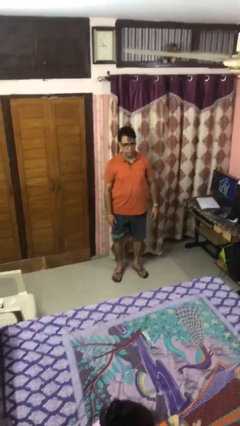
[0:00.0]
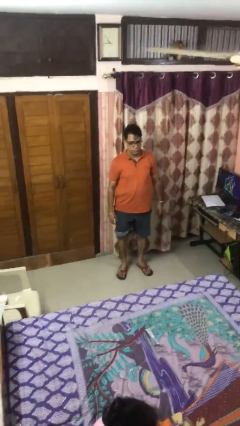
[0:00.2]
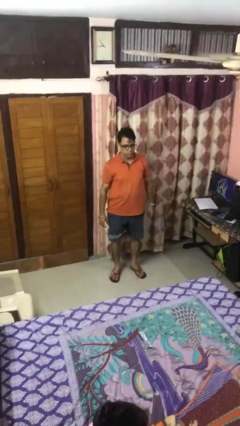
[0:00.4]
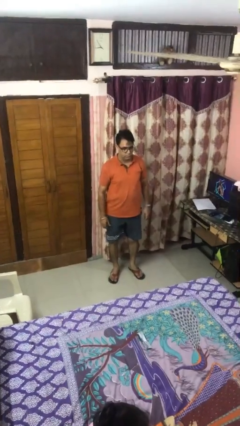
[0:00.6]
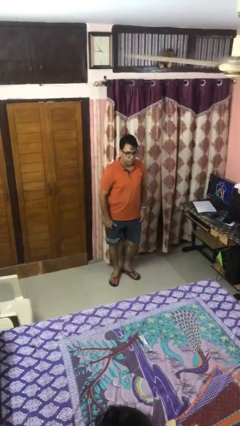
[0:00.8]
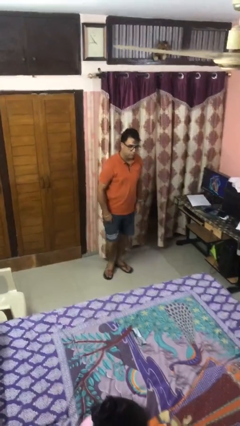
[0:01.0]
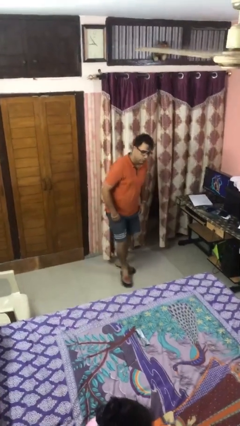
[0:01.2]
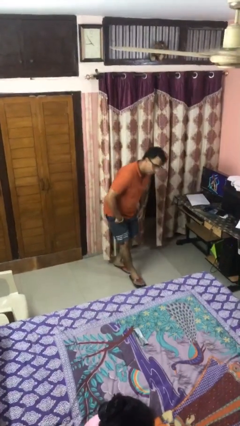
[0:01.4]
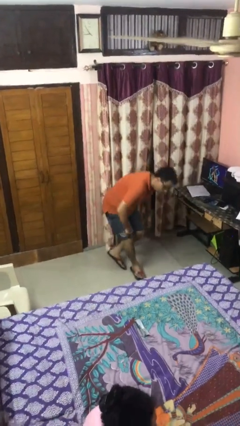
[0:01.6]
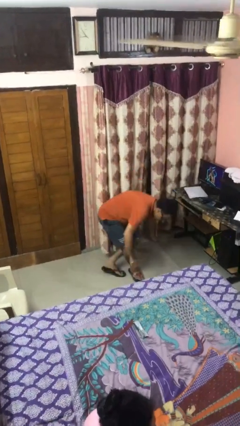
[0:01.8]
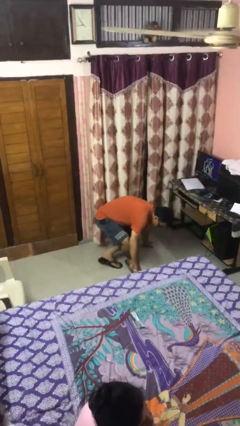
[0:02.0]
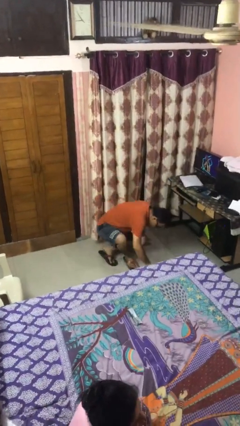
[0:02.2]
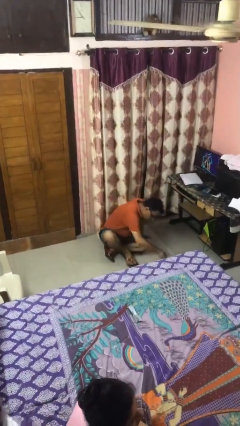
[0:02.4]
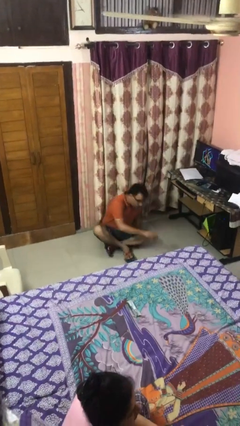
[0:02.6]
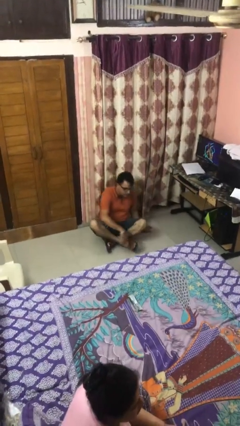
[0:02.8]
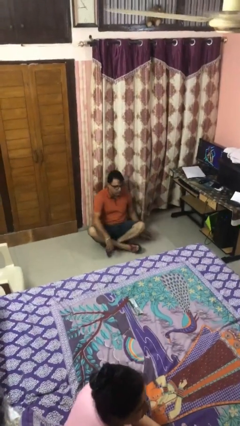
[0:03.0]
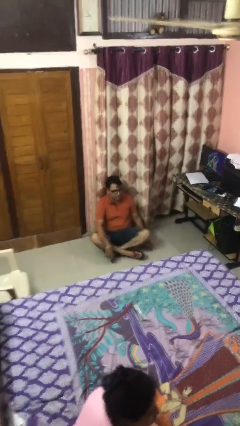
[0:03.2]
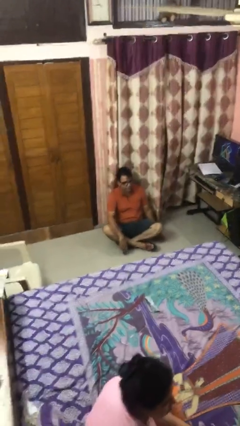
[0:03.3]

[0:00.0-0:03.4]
person sits crisscross

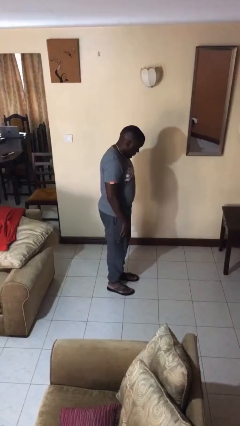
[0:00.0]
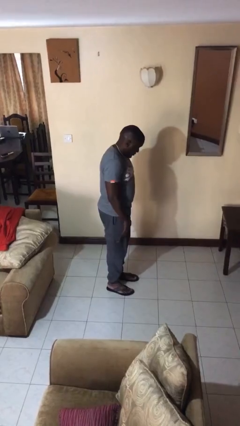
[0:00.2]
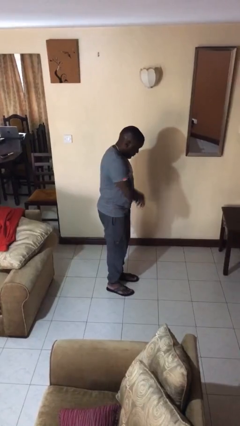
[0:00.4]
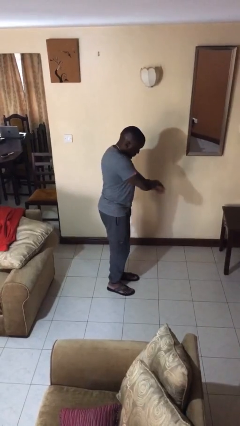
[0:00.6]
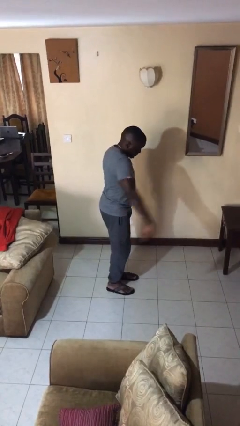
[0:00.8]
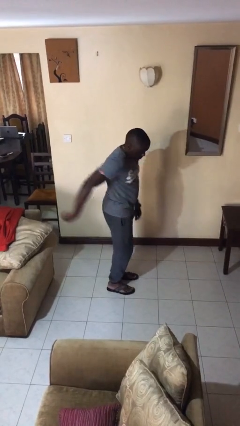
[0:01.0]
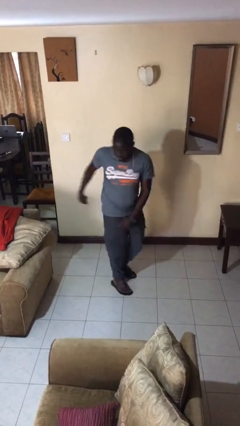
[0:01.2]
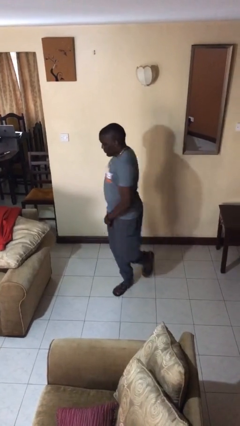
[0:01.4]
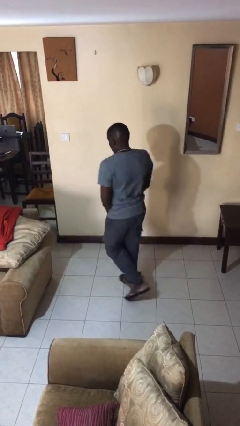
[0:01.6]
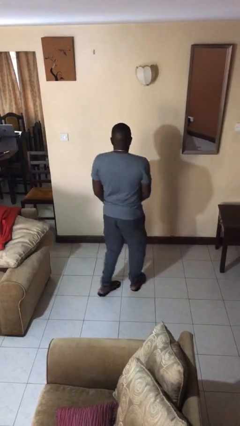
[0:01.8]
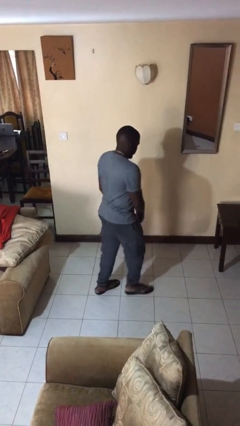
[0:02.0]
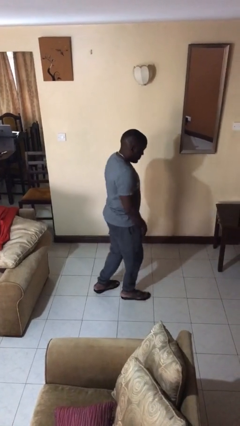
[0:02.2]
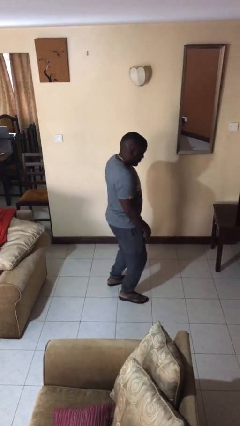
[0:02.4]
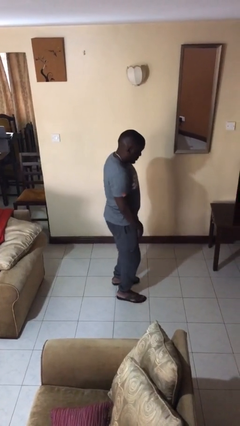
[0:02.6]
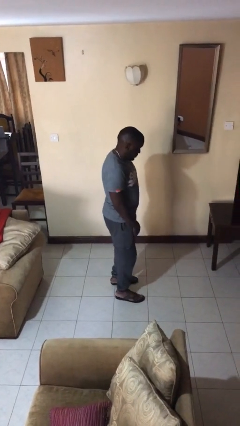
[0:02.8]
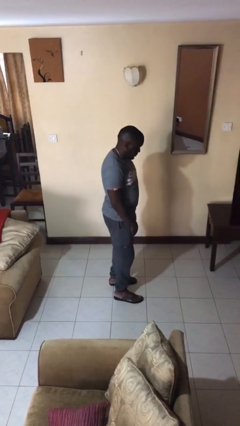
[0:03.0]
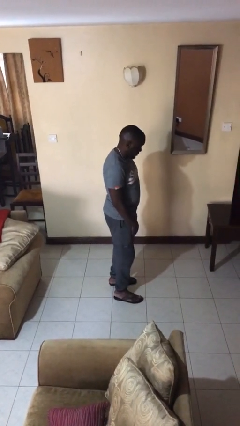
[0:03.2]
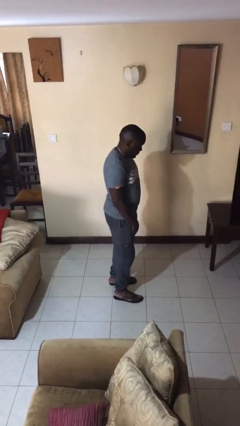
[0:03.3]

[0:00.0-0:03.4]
person twirls

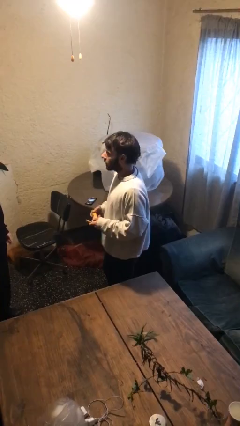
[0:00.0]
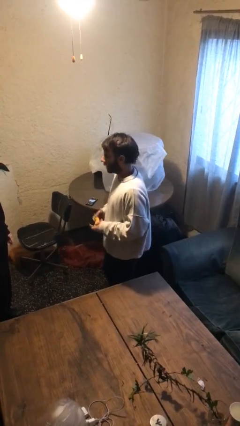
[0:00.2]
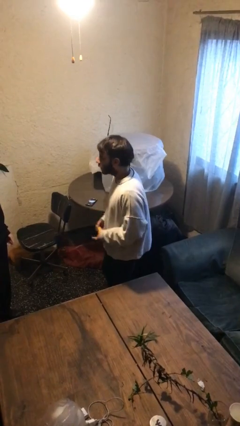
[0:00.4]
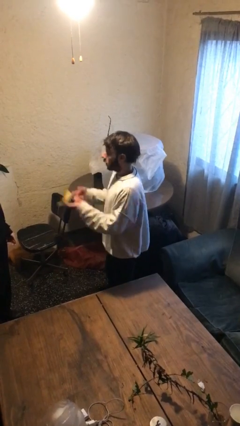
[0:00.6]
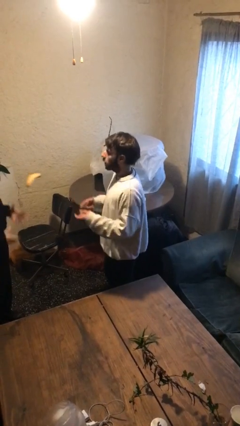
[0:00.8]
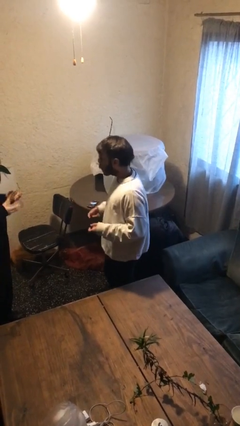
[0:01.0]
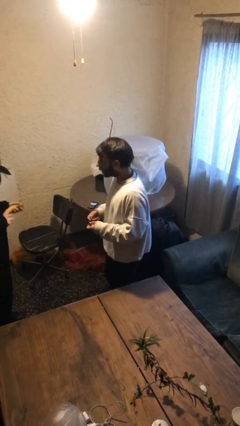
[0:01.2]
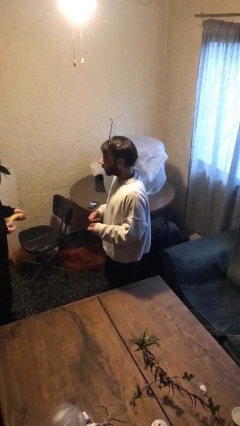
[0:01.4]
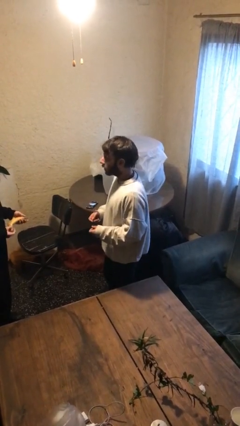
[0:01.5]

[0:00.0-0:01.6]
person throws object to person

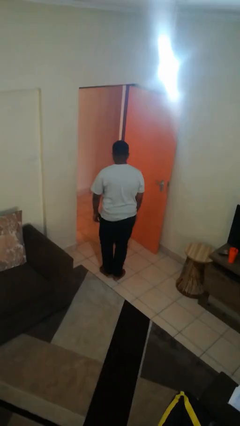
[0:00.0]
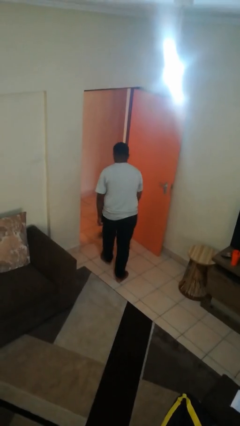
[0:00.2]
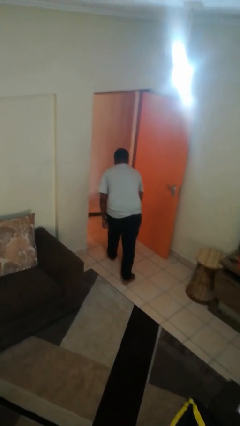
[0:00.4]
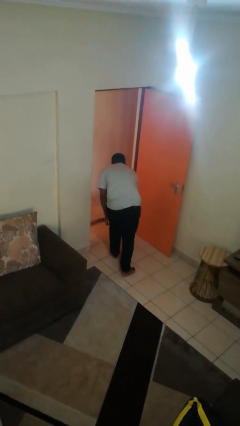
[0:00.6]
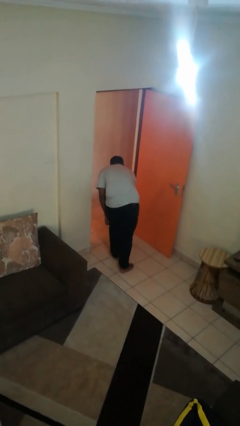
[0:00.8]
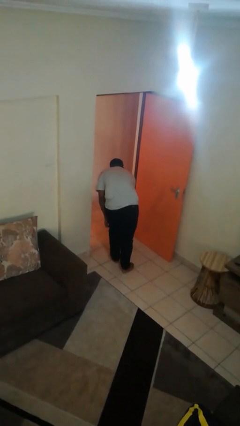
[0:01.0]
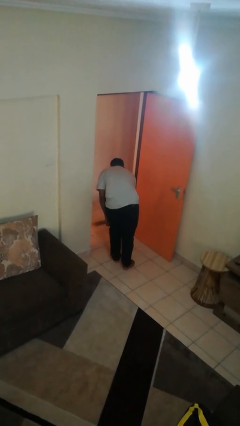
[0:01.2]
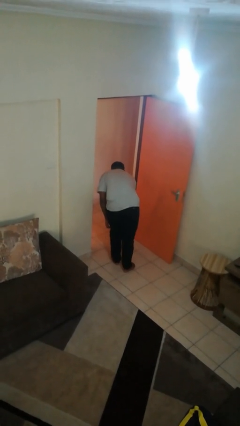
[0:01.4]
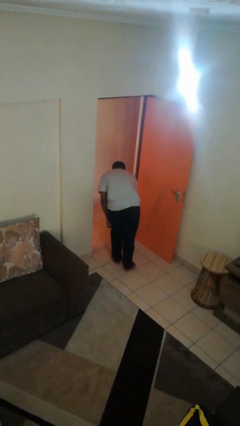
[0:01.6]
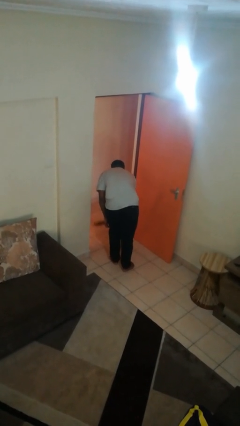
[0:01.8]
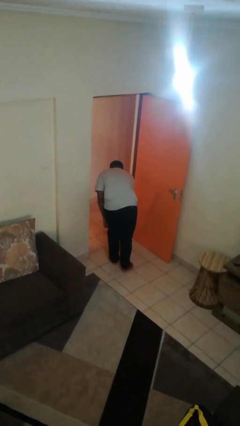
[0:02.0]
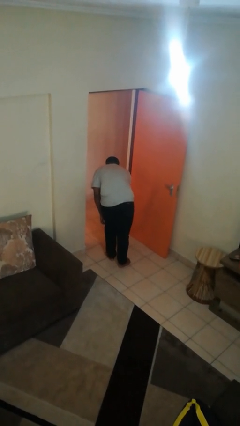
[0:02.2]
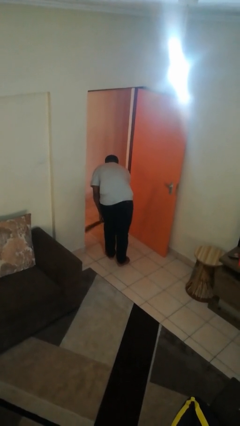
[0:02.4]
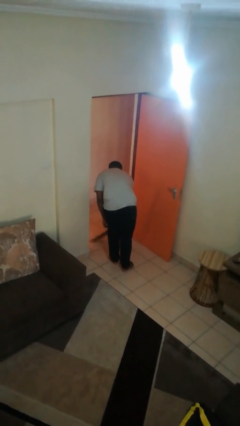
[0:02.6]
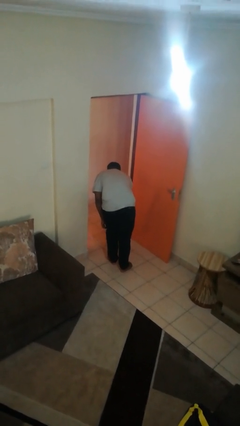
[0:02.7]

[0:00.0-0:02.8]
person sweeps floor

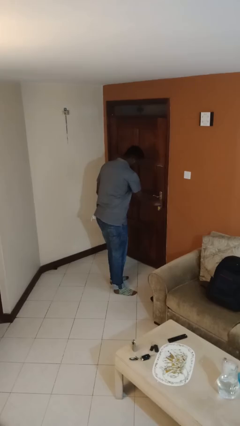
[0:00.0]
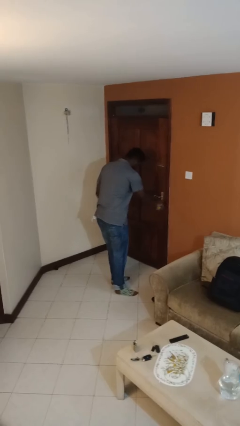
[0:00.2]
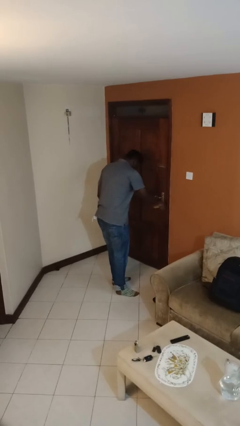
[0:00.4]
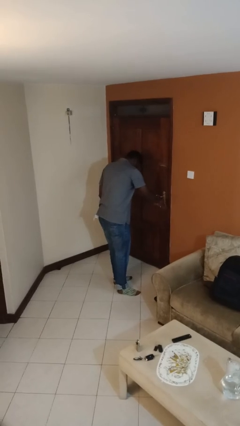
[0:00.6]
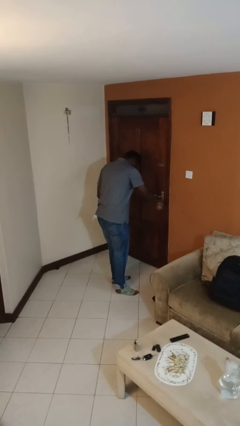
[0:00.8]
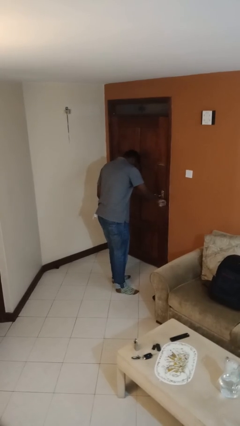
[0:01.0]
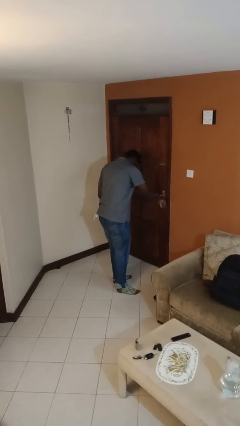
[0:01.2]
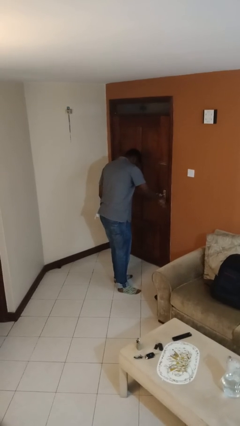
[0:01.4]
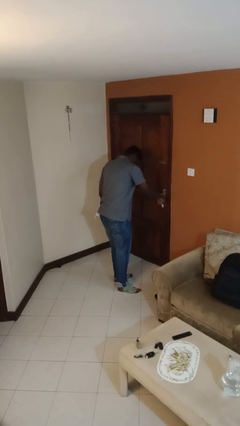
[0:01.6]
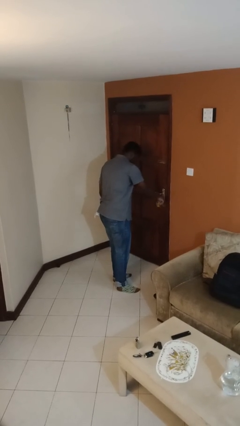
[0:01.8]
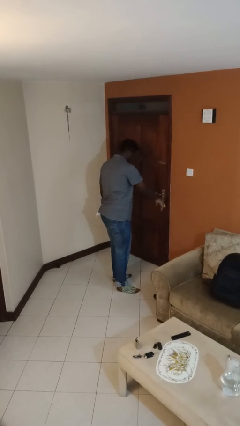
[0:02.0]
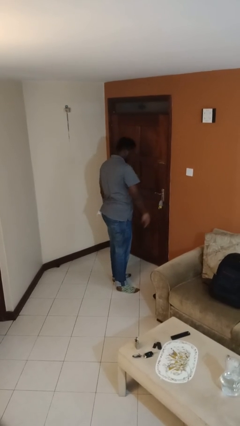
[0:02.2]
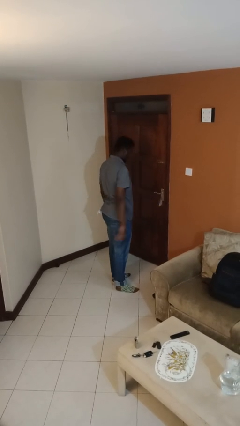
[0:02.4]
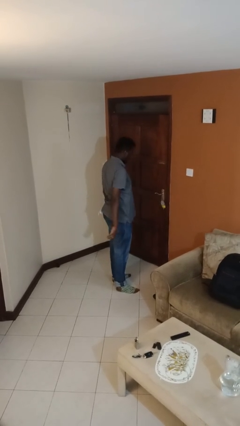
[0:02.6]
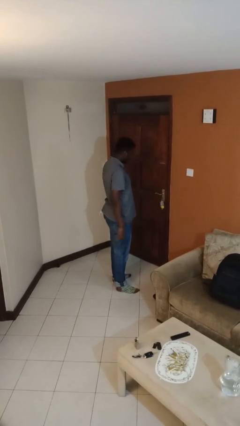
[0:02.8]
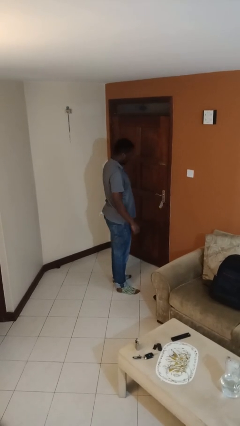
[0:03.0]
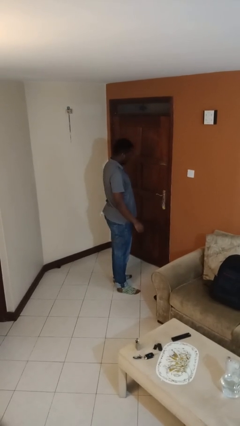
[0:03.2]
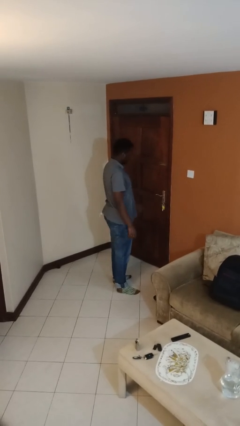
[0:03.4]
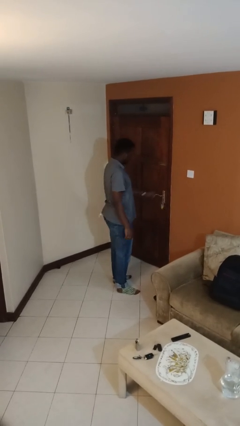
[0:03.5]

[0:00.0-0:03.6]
person unlocks door with keys

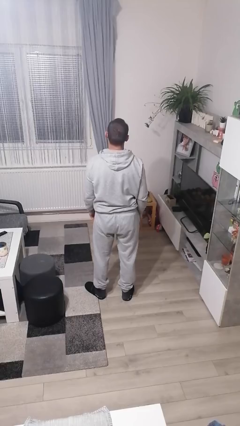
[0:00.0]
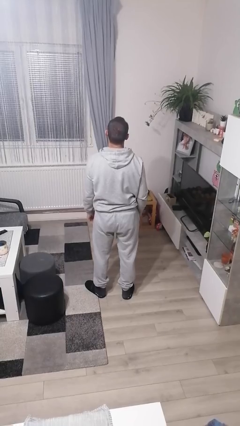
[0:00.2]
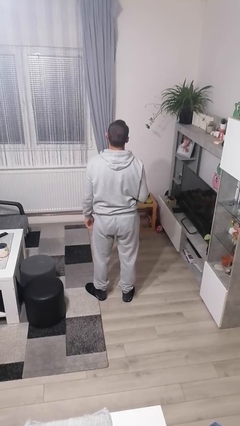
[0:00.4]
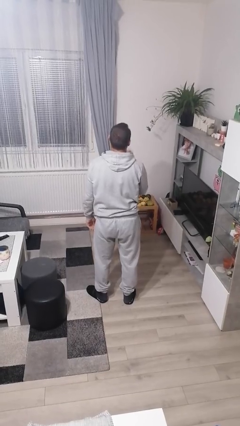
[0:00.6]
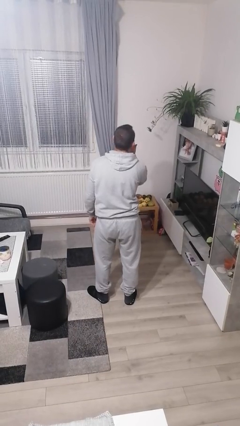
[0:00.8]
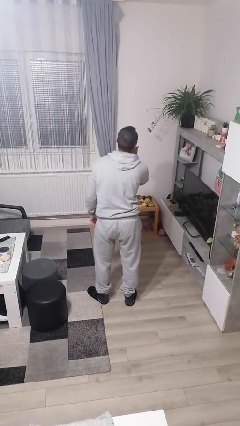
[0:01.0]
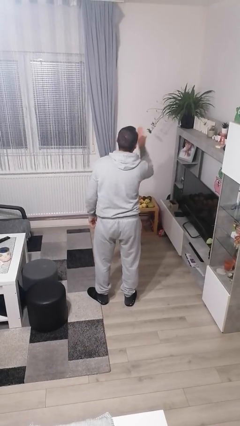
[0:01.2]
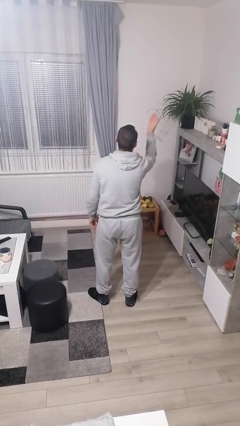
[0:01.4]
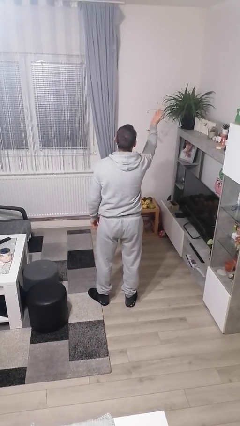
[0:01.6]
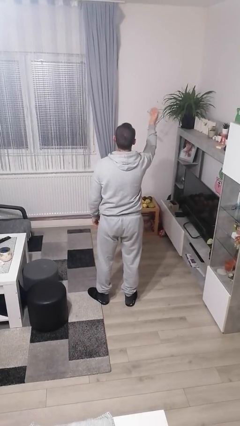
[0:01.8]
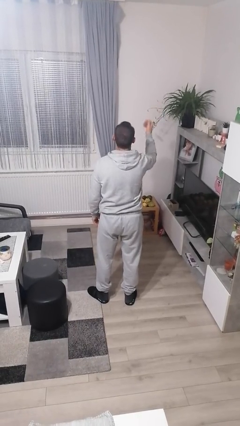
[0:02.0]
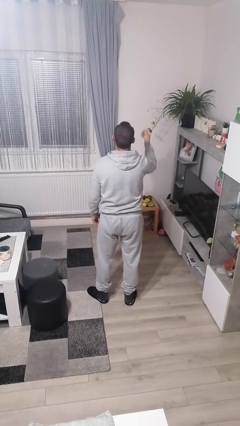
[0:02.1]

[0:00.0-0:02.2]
person gestures blow kiss

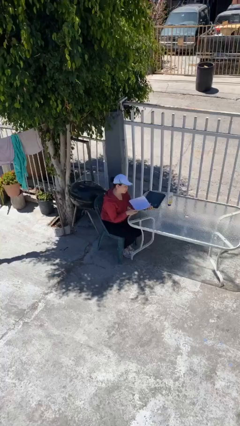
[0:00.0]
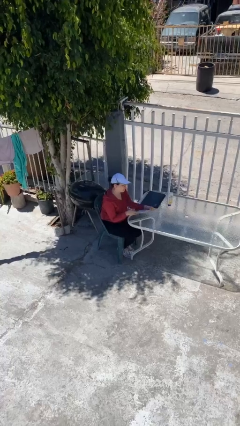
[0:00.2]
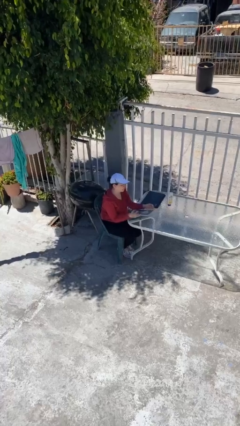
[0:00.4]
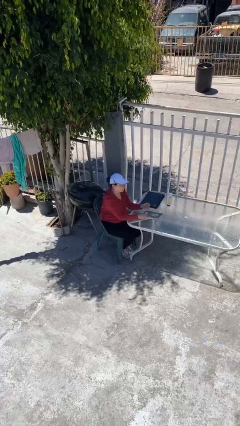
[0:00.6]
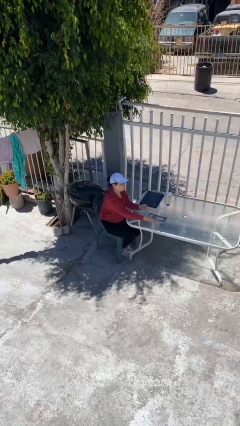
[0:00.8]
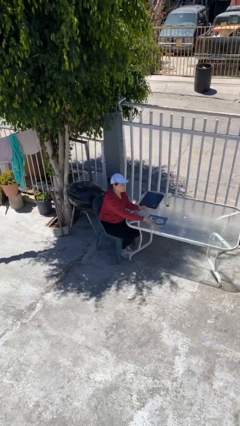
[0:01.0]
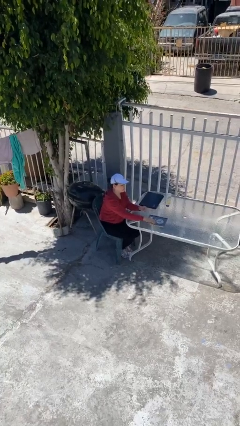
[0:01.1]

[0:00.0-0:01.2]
person puts down object on table
